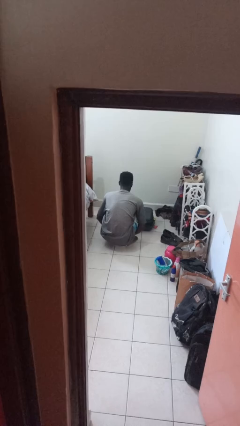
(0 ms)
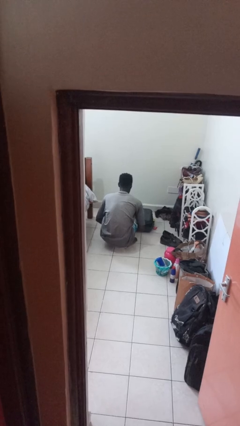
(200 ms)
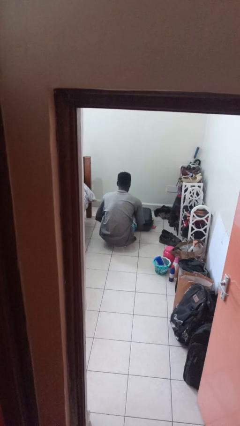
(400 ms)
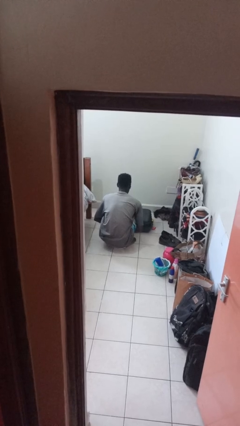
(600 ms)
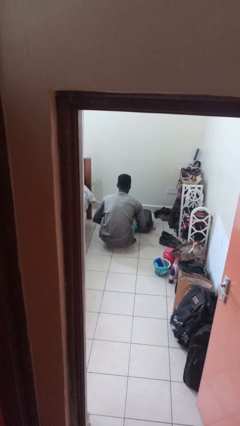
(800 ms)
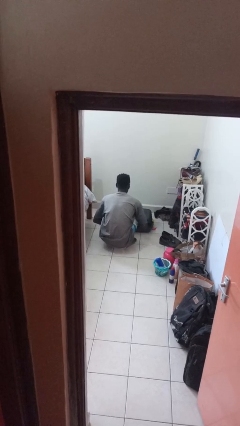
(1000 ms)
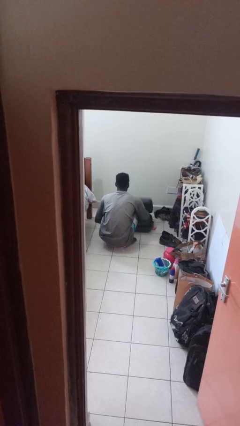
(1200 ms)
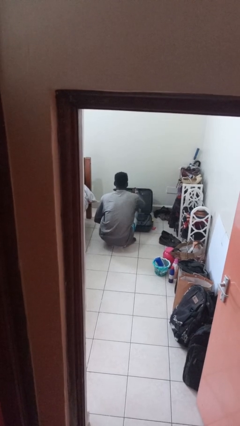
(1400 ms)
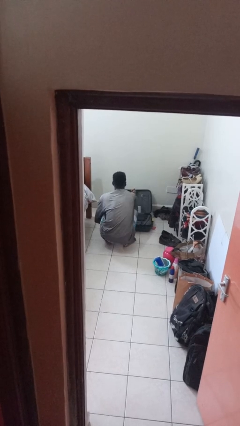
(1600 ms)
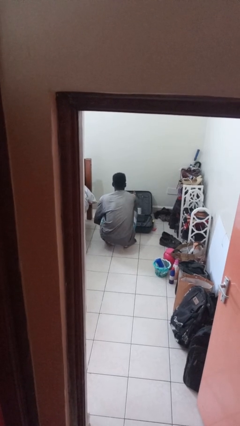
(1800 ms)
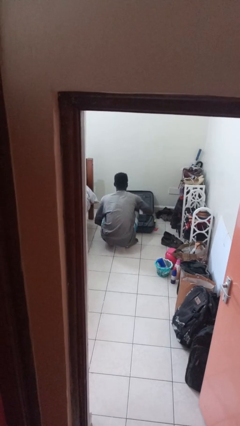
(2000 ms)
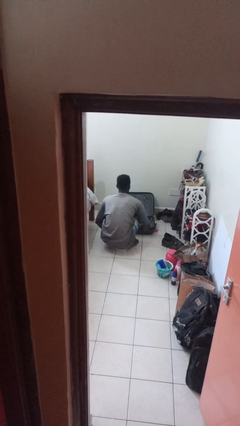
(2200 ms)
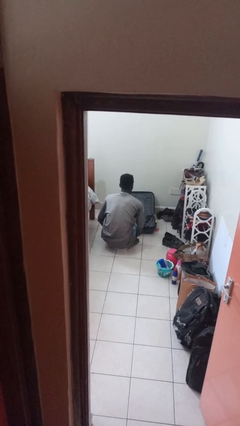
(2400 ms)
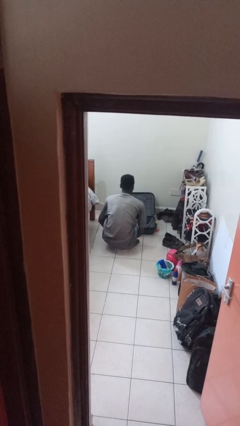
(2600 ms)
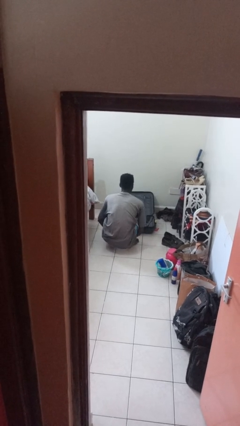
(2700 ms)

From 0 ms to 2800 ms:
person opens suitcase

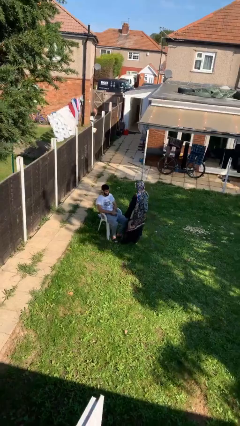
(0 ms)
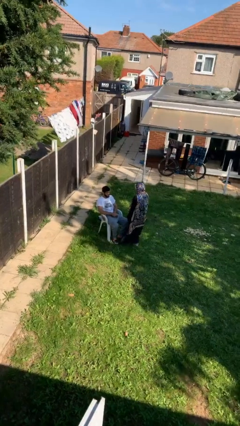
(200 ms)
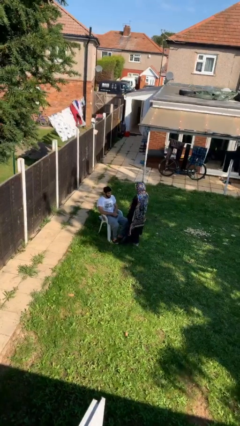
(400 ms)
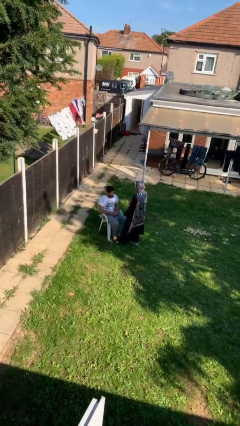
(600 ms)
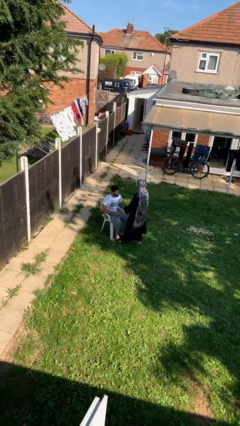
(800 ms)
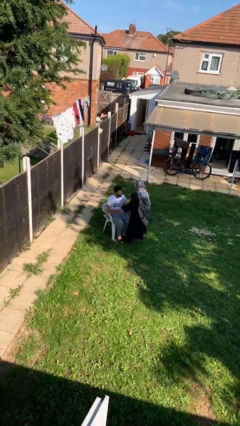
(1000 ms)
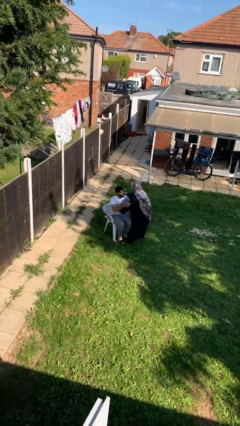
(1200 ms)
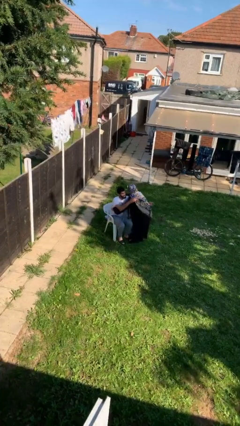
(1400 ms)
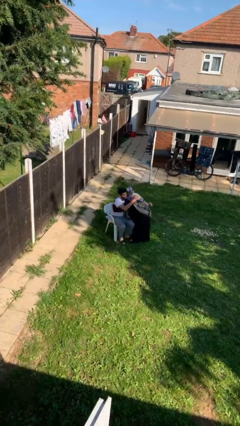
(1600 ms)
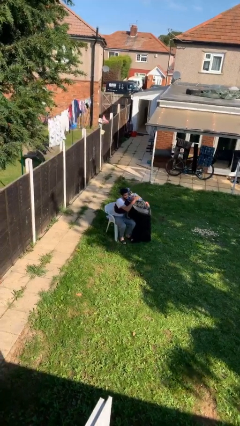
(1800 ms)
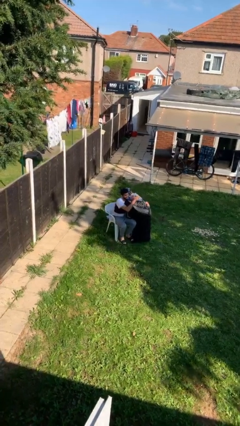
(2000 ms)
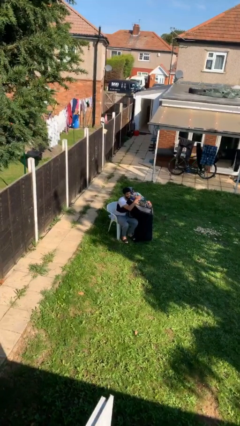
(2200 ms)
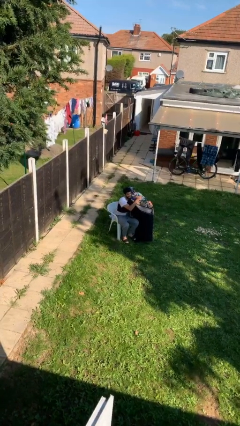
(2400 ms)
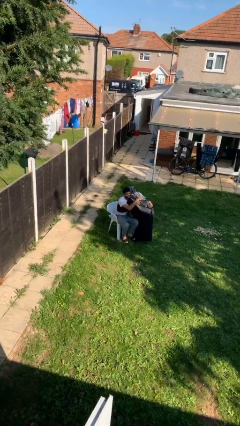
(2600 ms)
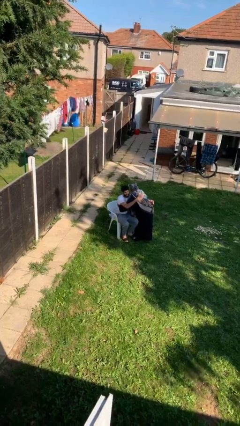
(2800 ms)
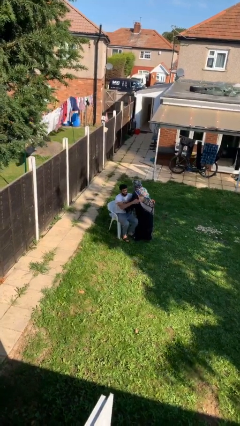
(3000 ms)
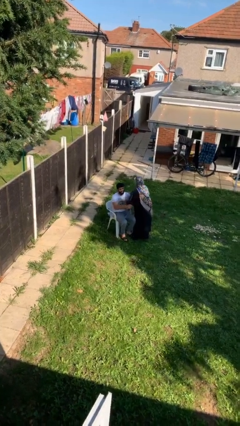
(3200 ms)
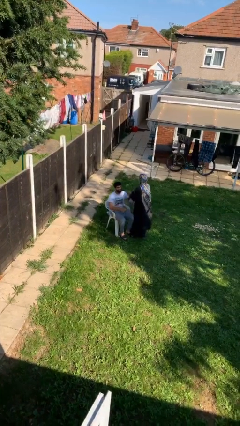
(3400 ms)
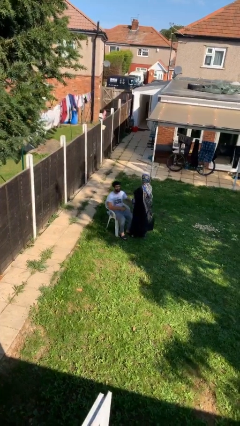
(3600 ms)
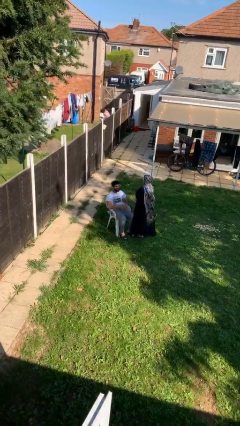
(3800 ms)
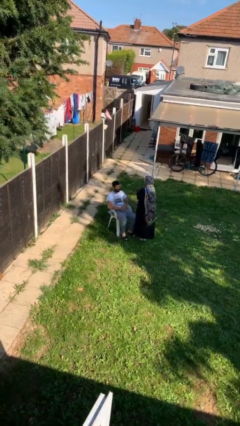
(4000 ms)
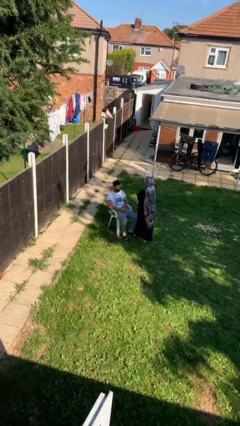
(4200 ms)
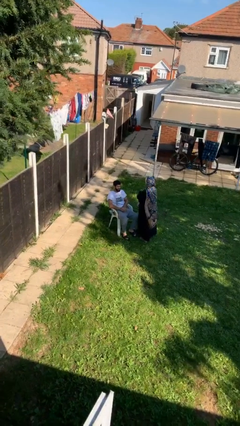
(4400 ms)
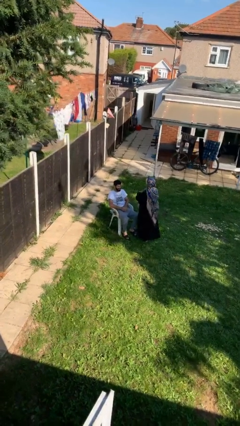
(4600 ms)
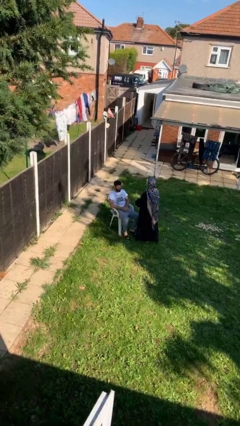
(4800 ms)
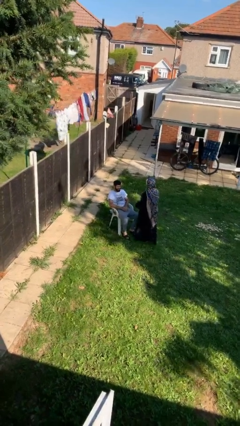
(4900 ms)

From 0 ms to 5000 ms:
person embraces person

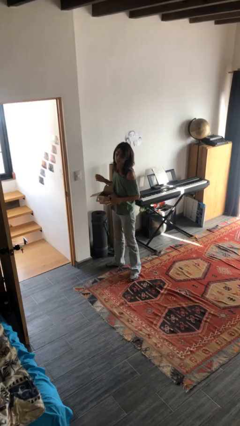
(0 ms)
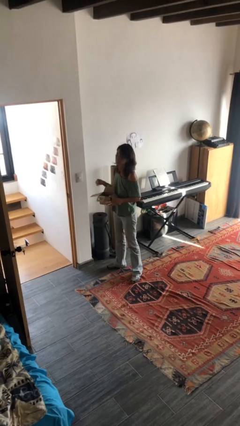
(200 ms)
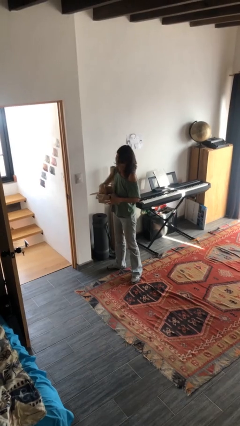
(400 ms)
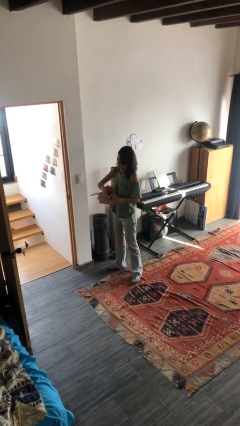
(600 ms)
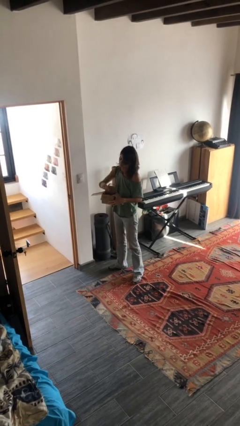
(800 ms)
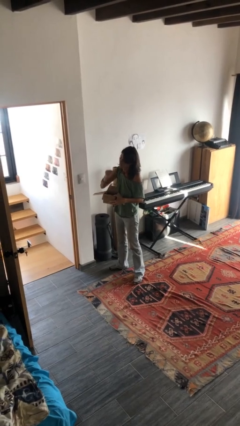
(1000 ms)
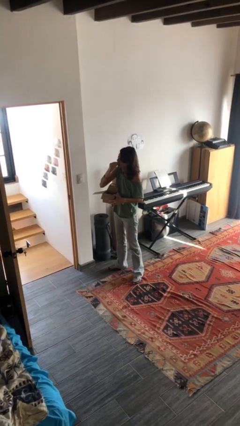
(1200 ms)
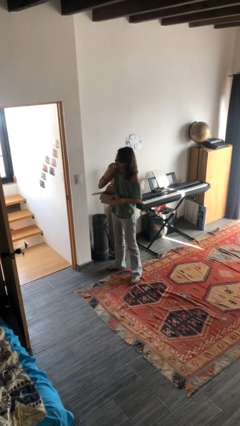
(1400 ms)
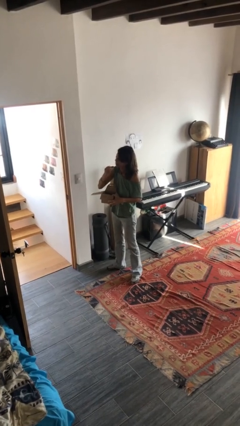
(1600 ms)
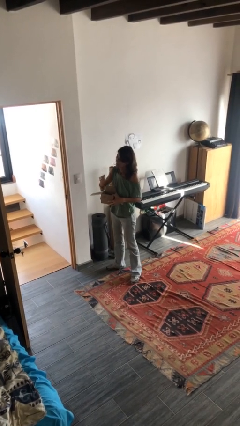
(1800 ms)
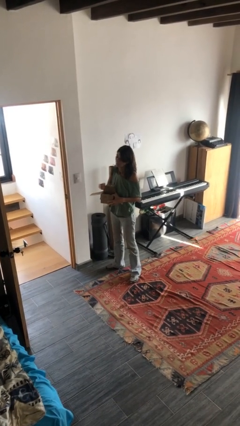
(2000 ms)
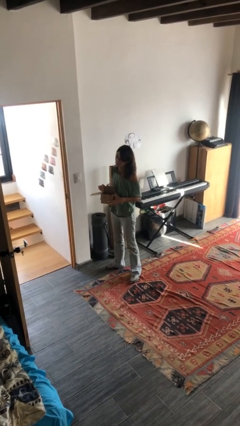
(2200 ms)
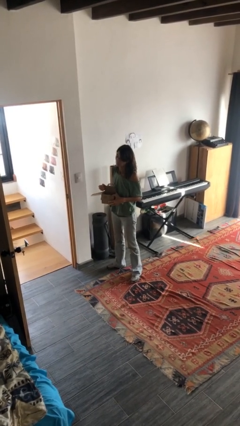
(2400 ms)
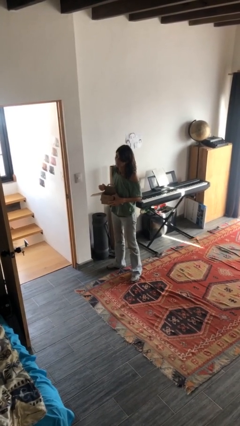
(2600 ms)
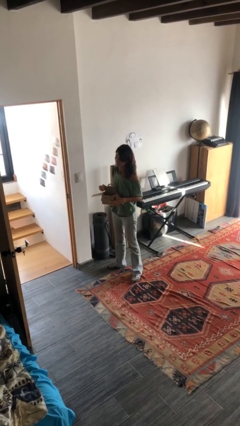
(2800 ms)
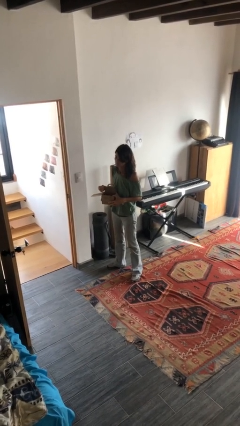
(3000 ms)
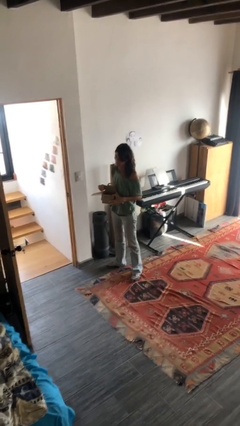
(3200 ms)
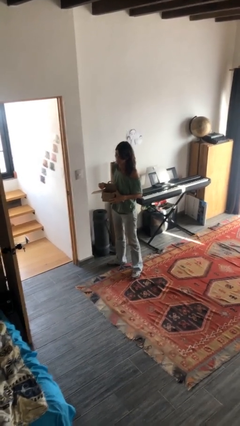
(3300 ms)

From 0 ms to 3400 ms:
person eats snack from bag

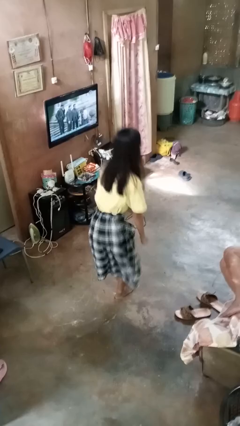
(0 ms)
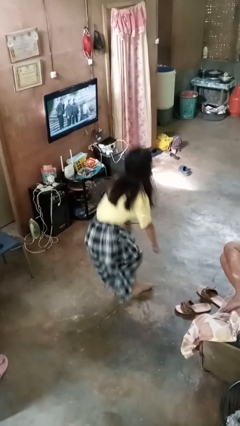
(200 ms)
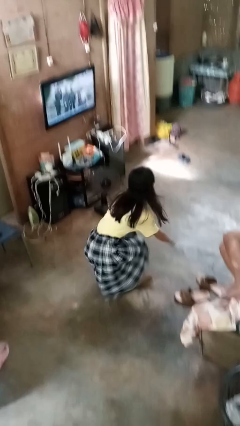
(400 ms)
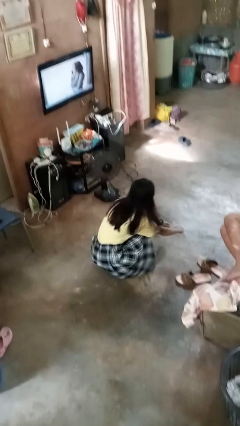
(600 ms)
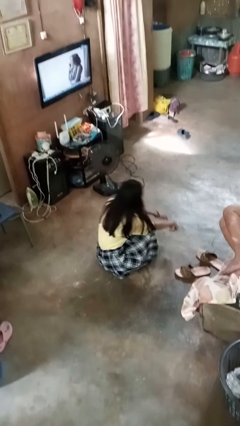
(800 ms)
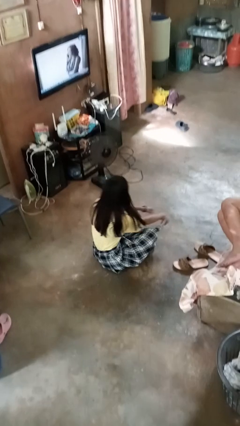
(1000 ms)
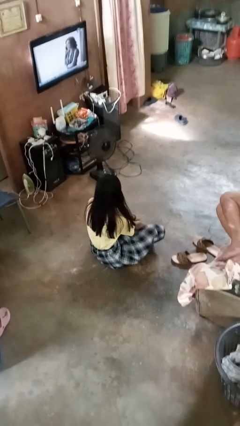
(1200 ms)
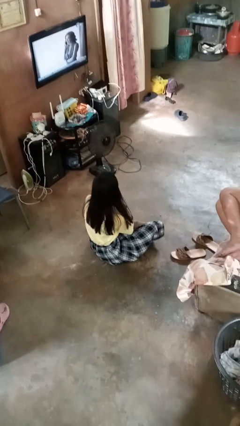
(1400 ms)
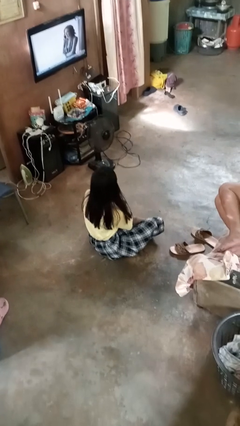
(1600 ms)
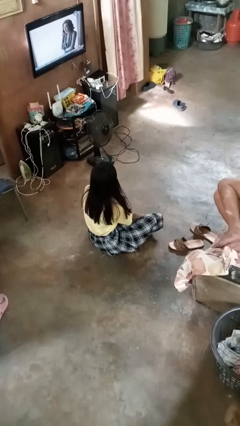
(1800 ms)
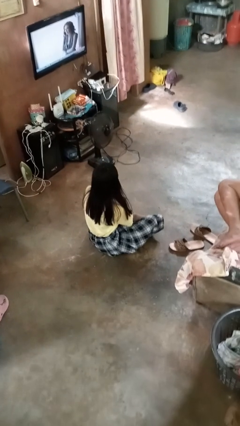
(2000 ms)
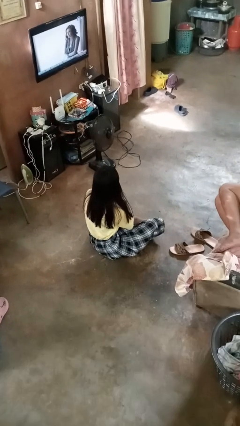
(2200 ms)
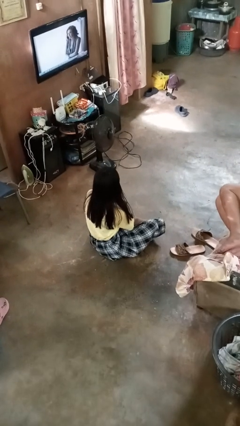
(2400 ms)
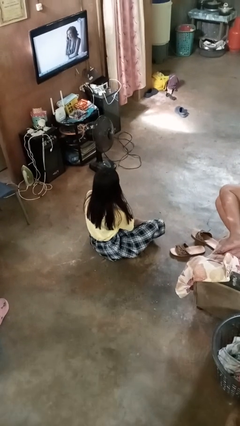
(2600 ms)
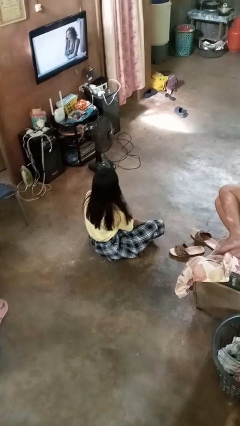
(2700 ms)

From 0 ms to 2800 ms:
person sits crisscross

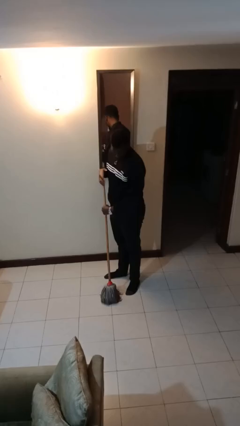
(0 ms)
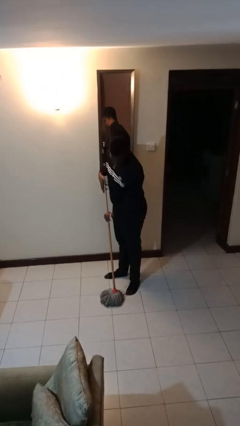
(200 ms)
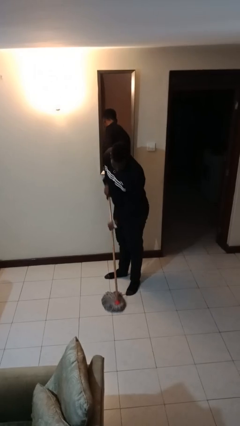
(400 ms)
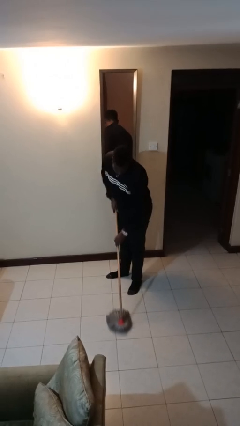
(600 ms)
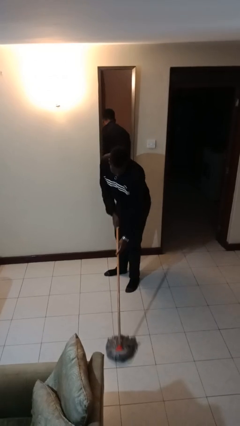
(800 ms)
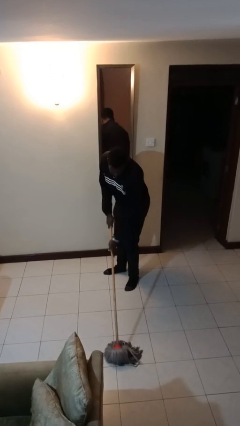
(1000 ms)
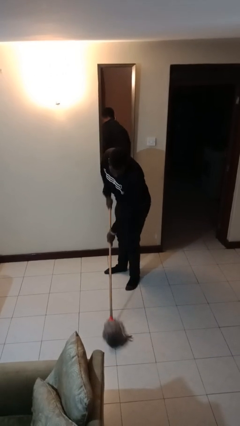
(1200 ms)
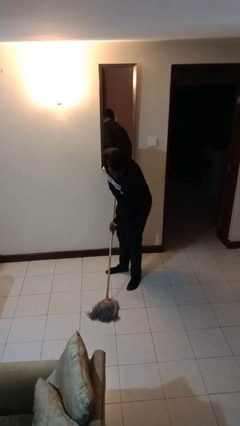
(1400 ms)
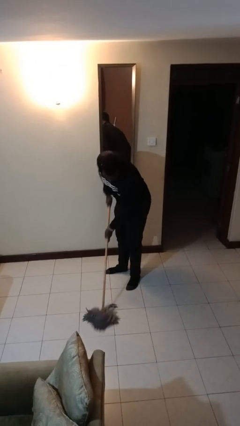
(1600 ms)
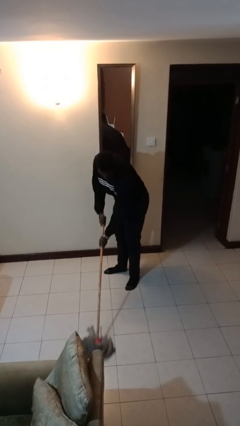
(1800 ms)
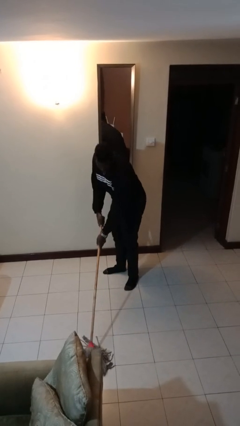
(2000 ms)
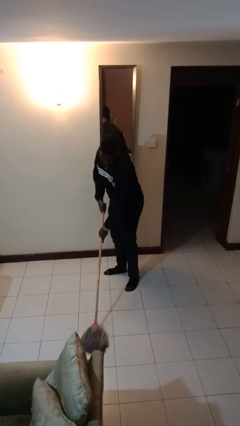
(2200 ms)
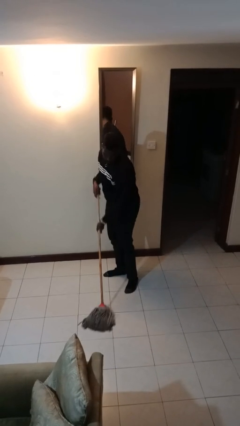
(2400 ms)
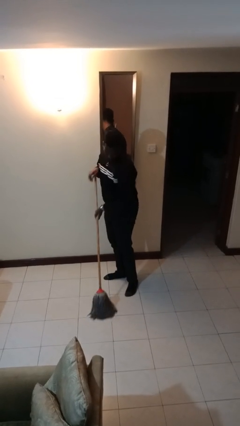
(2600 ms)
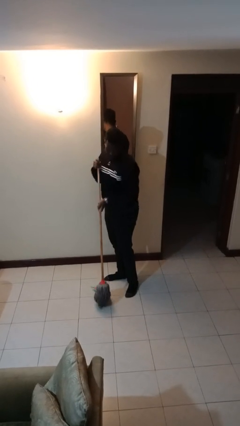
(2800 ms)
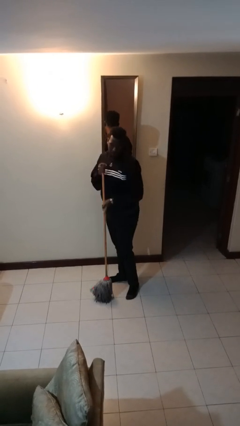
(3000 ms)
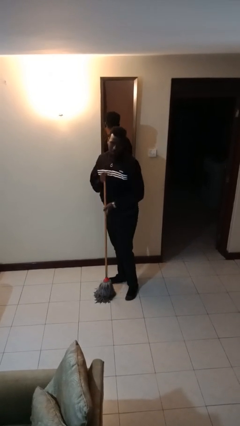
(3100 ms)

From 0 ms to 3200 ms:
person mops

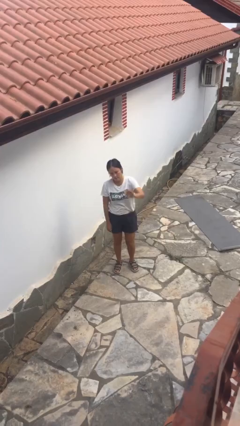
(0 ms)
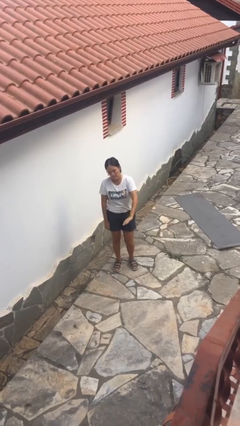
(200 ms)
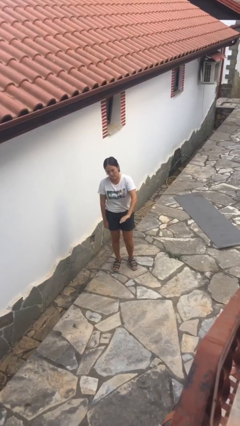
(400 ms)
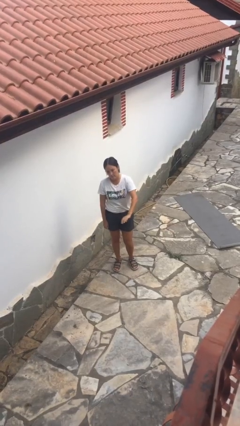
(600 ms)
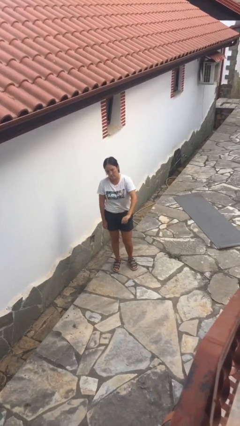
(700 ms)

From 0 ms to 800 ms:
person gestures swipe down
